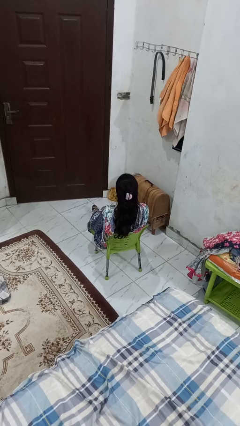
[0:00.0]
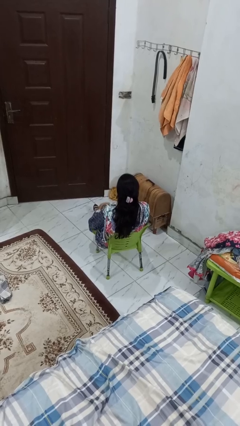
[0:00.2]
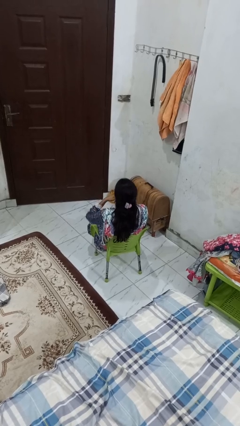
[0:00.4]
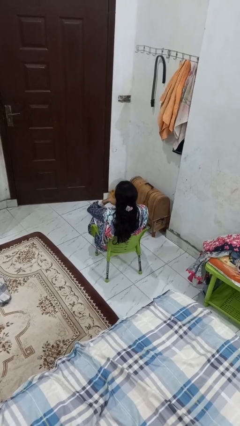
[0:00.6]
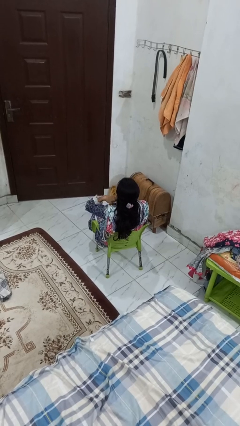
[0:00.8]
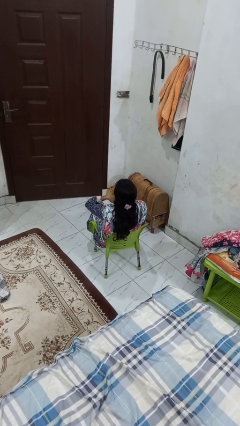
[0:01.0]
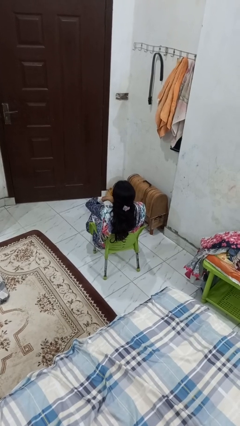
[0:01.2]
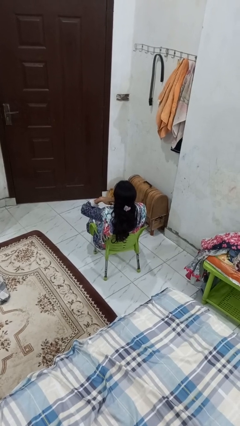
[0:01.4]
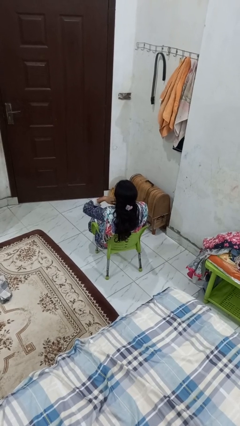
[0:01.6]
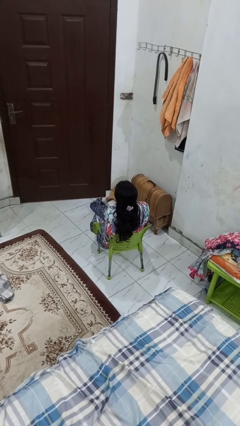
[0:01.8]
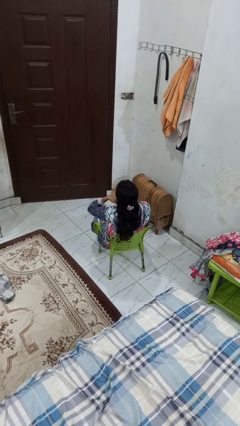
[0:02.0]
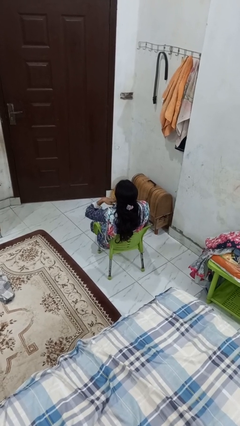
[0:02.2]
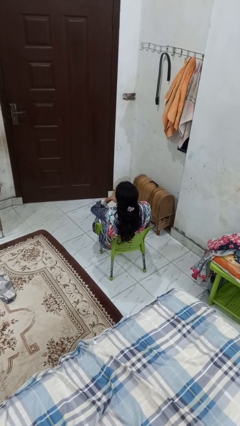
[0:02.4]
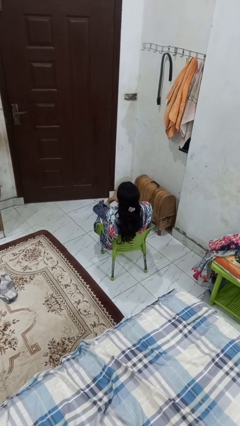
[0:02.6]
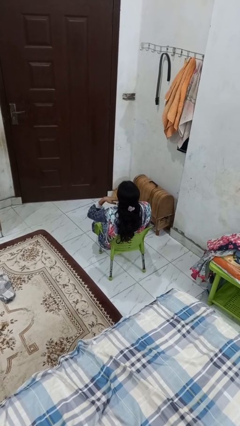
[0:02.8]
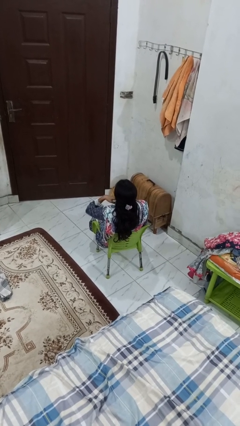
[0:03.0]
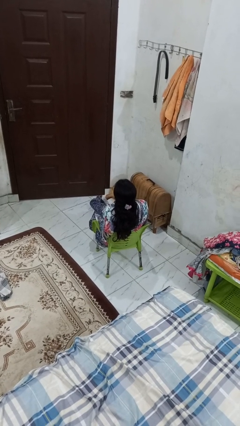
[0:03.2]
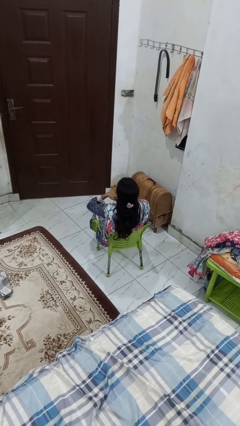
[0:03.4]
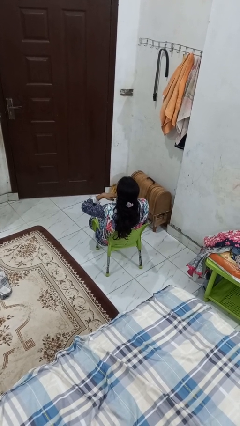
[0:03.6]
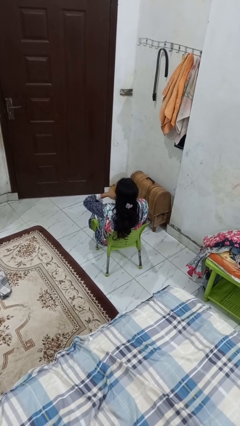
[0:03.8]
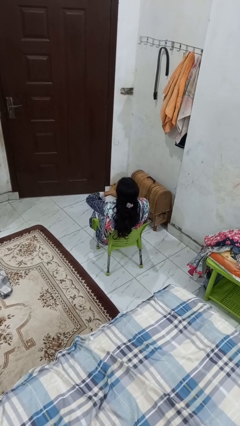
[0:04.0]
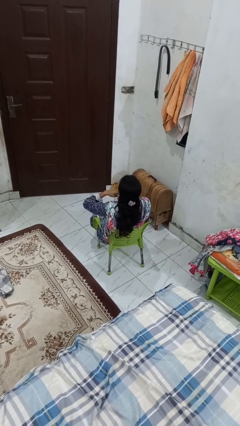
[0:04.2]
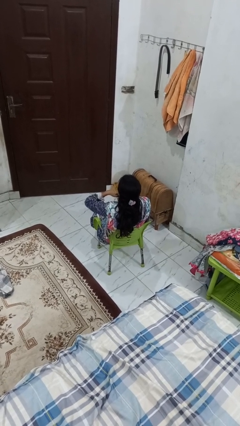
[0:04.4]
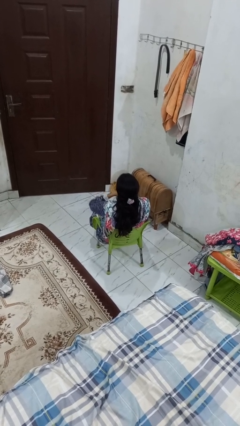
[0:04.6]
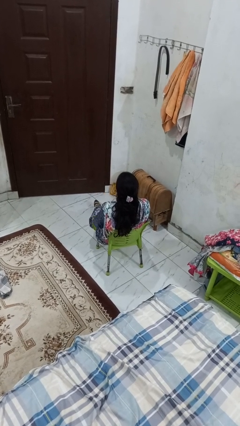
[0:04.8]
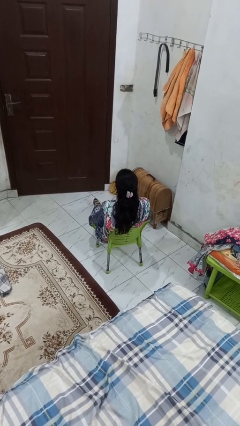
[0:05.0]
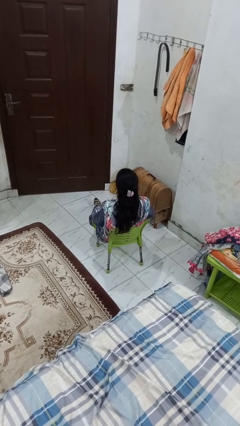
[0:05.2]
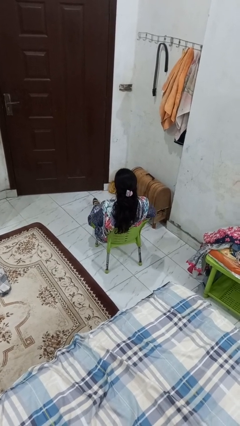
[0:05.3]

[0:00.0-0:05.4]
person gestures cut

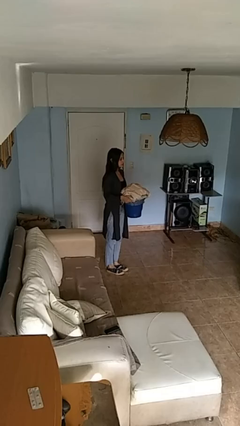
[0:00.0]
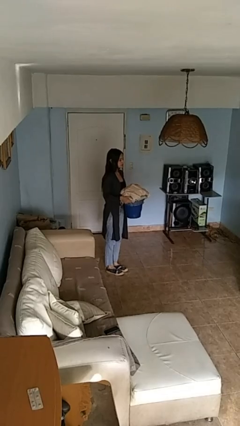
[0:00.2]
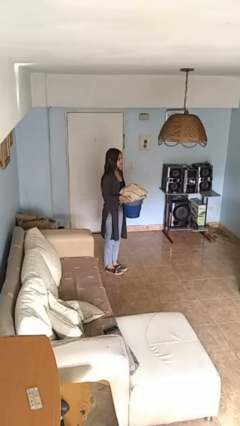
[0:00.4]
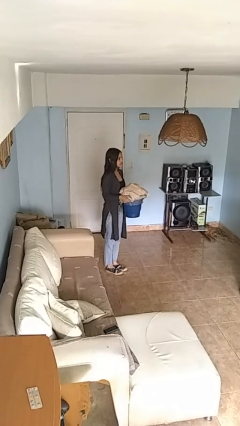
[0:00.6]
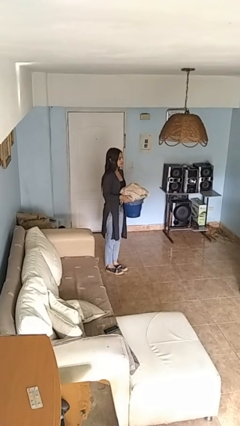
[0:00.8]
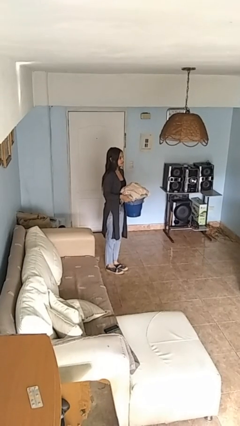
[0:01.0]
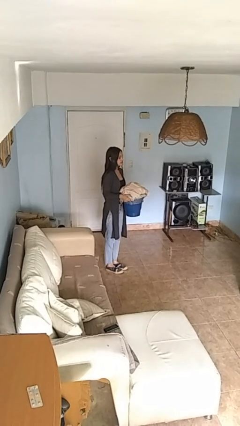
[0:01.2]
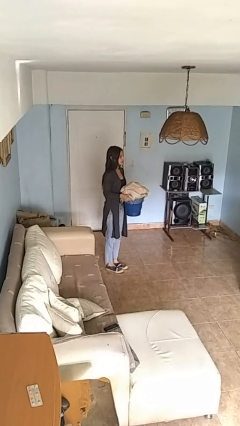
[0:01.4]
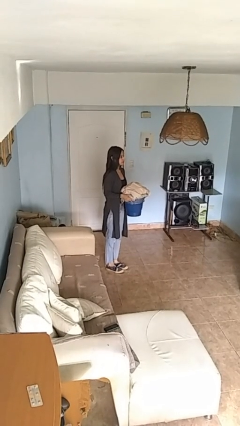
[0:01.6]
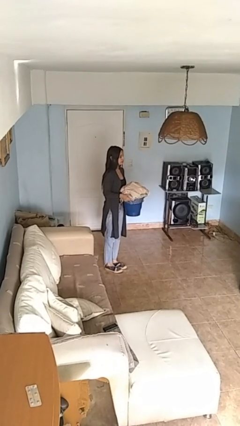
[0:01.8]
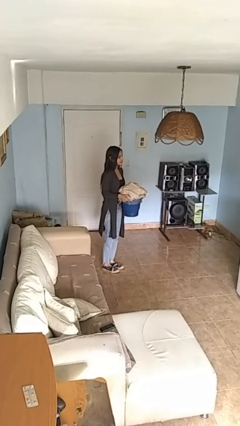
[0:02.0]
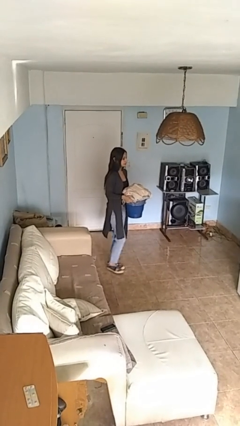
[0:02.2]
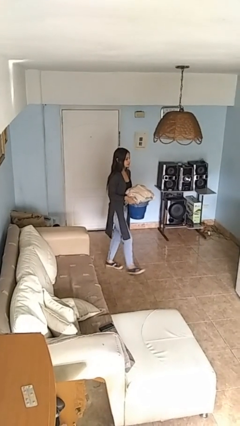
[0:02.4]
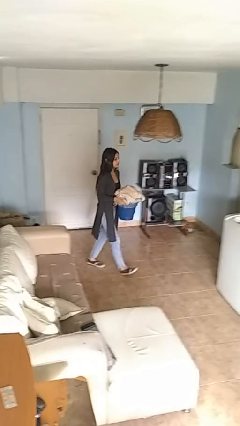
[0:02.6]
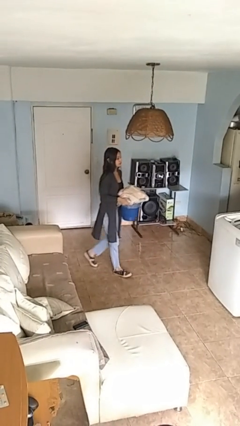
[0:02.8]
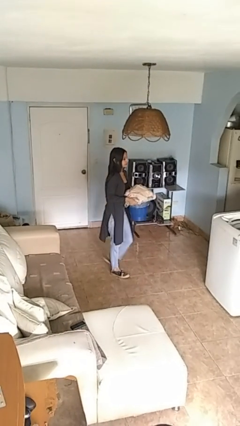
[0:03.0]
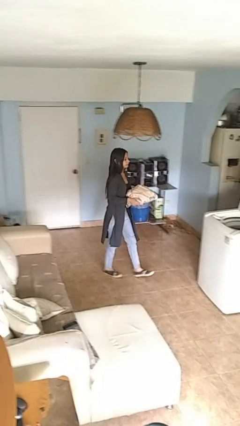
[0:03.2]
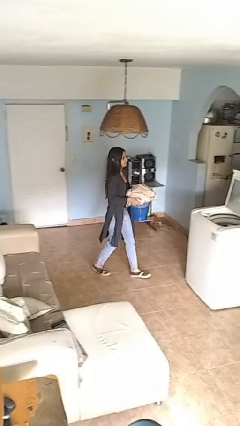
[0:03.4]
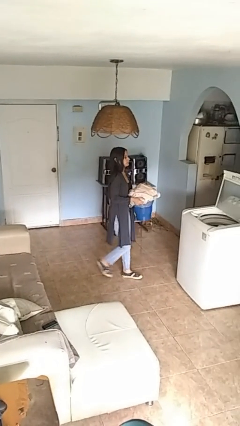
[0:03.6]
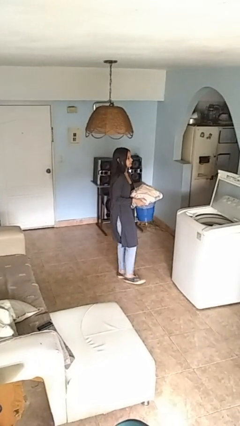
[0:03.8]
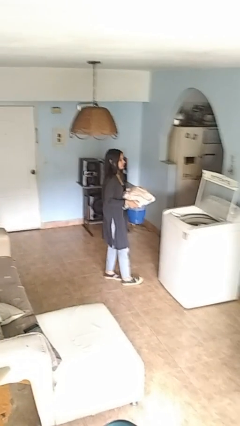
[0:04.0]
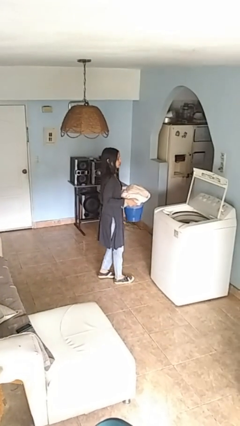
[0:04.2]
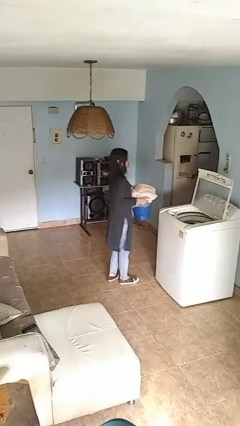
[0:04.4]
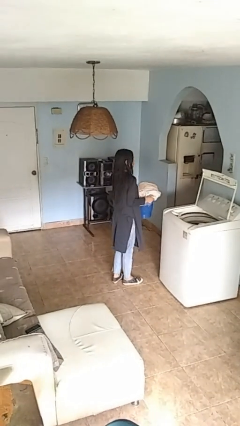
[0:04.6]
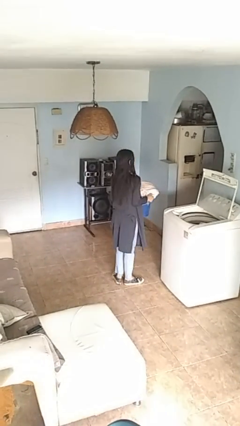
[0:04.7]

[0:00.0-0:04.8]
person carries laundry basket

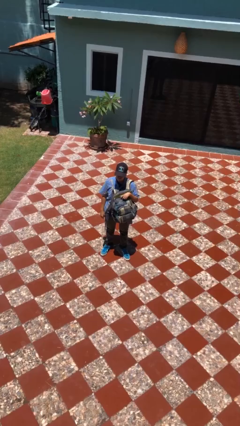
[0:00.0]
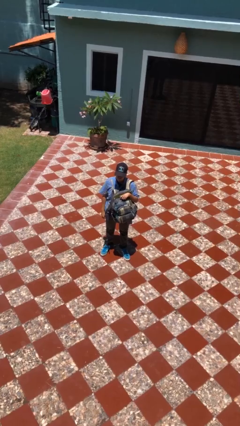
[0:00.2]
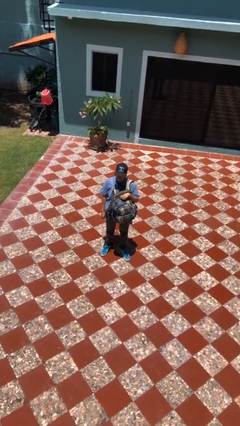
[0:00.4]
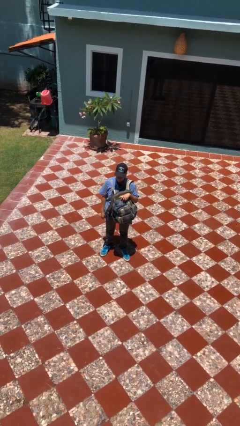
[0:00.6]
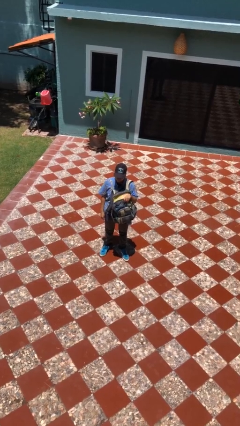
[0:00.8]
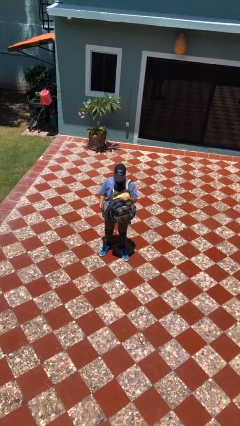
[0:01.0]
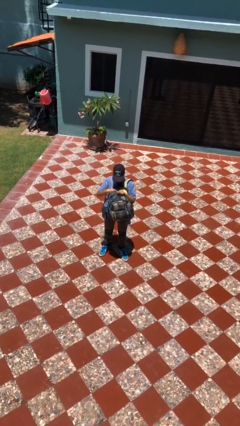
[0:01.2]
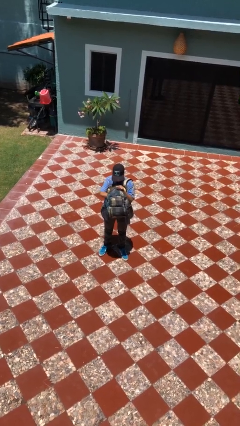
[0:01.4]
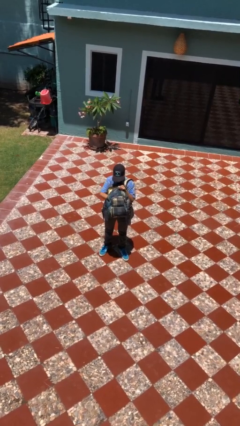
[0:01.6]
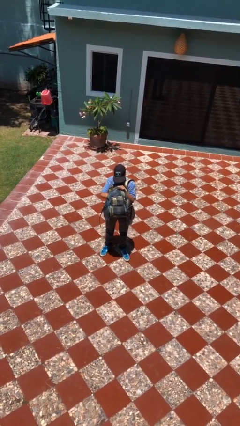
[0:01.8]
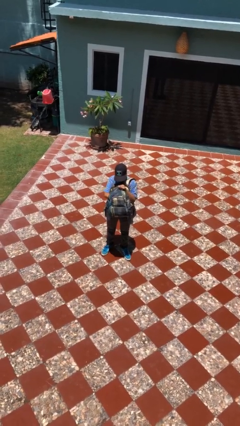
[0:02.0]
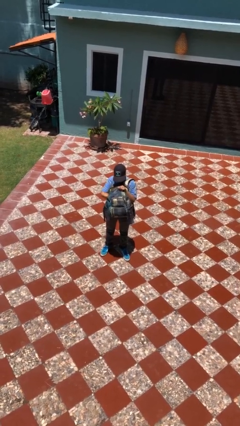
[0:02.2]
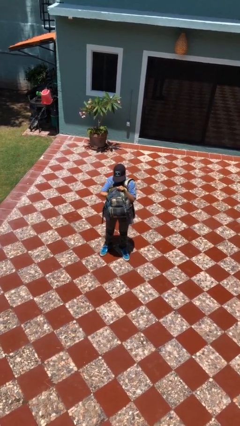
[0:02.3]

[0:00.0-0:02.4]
person searches in backpack

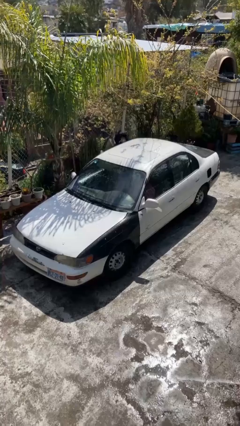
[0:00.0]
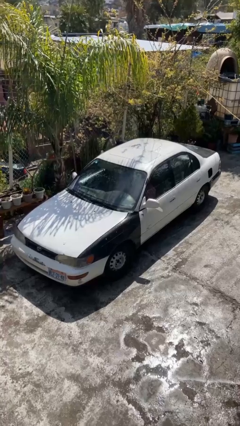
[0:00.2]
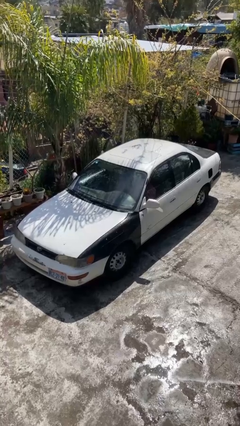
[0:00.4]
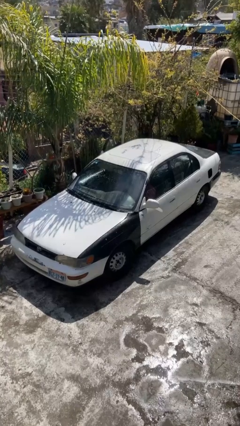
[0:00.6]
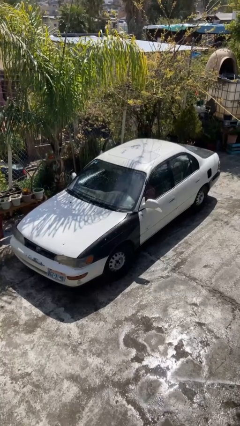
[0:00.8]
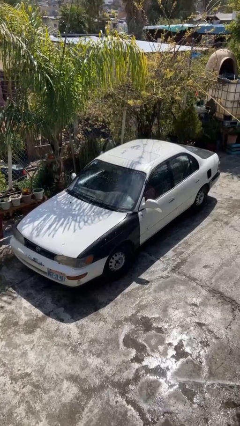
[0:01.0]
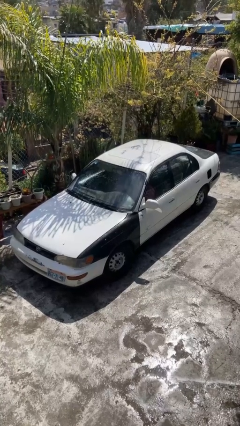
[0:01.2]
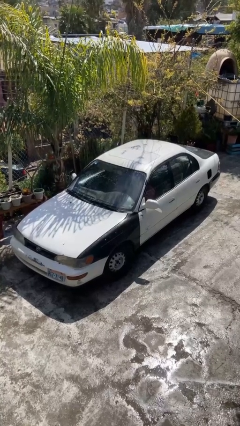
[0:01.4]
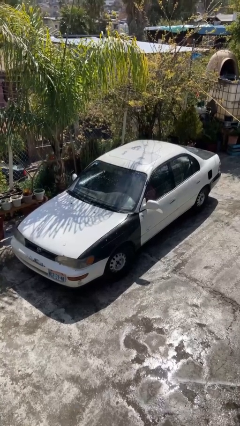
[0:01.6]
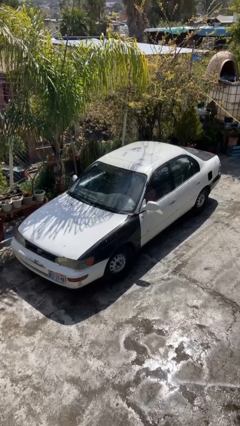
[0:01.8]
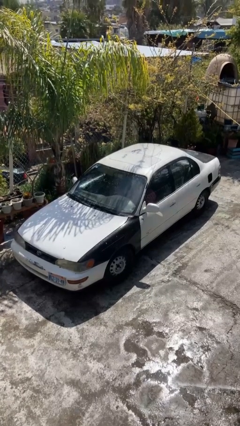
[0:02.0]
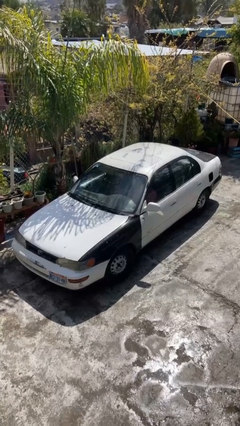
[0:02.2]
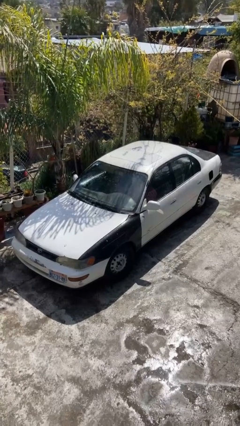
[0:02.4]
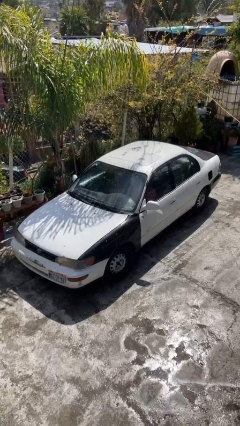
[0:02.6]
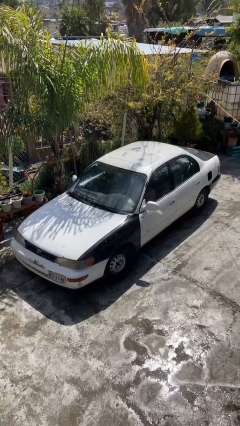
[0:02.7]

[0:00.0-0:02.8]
car picks up person

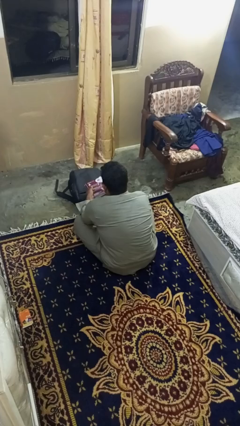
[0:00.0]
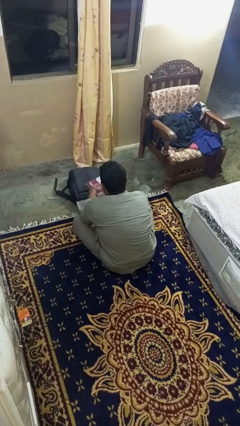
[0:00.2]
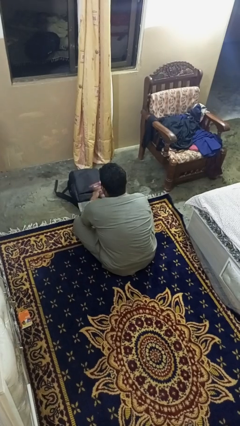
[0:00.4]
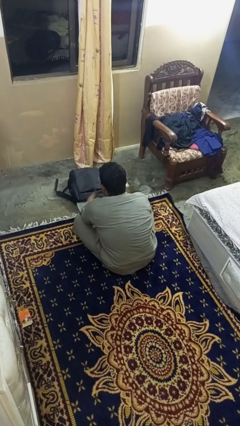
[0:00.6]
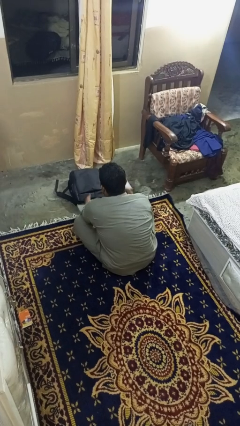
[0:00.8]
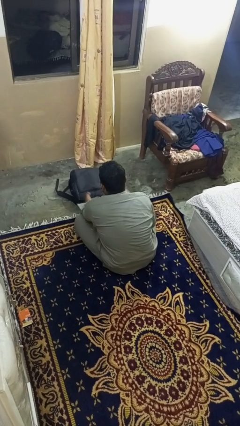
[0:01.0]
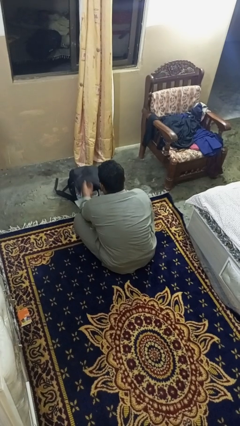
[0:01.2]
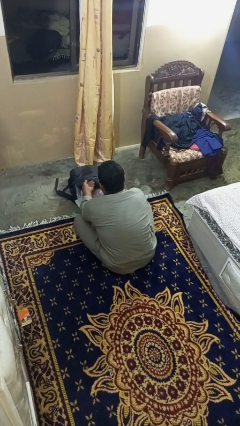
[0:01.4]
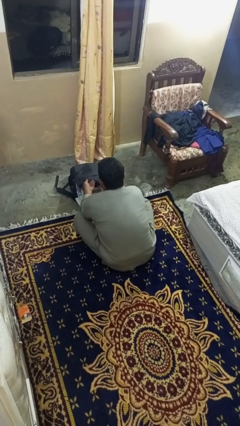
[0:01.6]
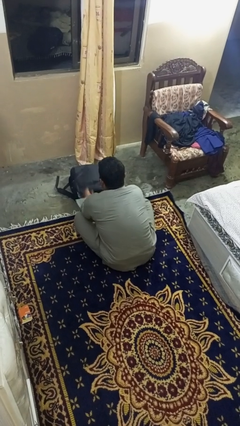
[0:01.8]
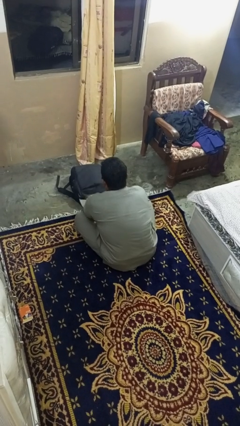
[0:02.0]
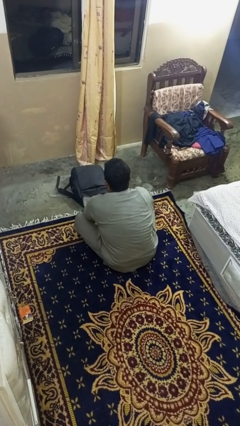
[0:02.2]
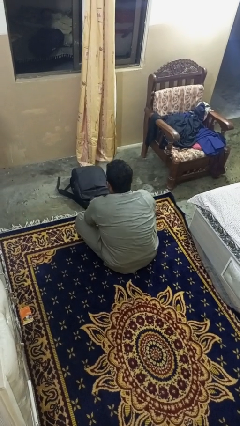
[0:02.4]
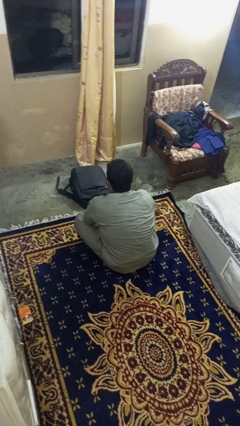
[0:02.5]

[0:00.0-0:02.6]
person puts object into bag
